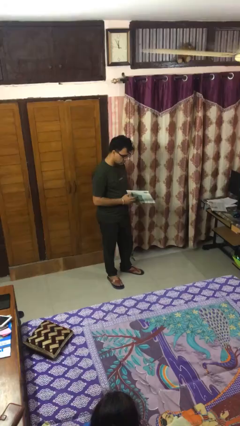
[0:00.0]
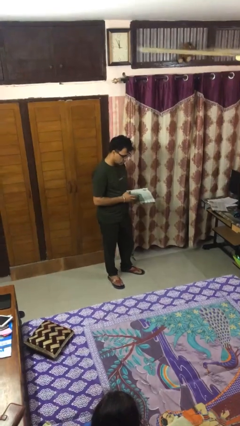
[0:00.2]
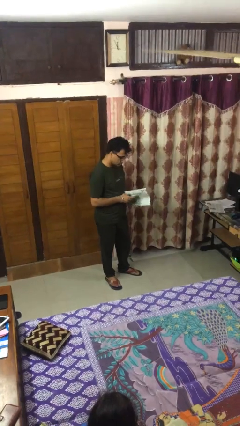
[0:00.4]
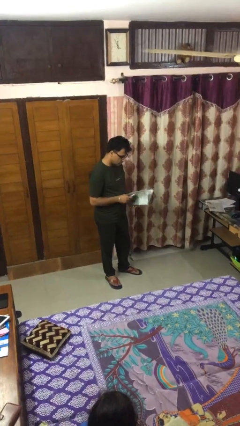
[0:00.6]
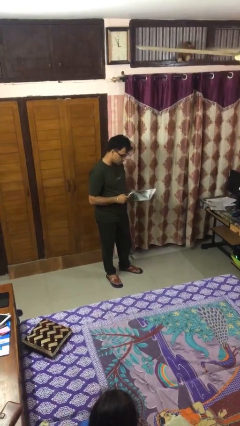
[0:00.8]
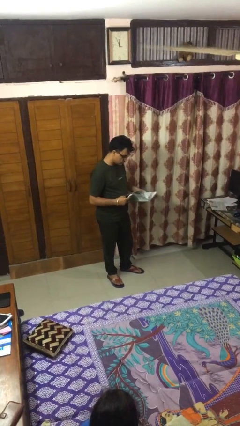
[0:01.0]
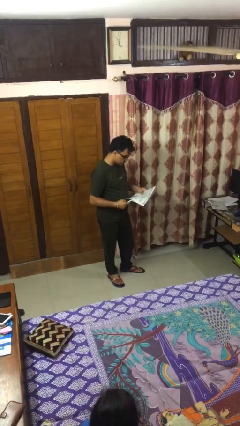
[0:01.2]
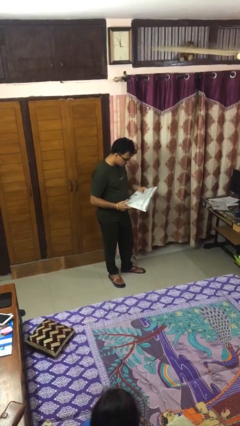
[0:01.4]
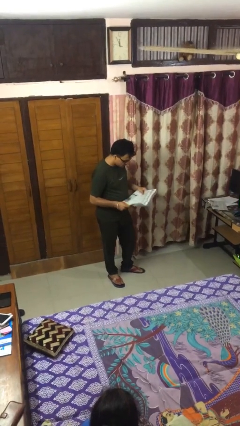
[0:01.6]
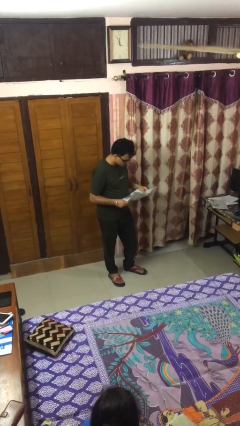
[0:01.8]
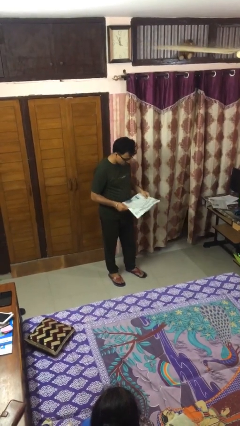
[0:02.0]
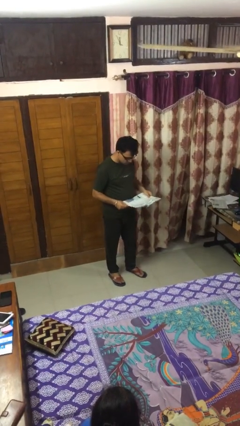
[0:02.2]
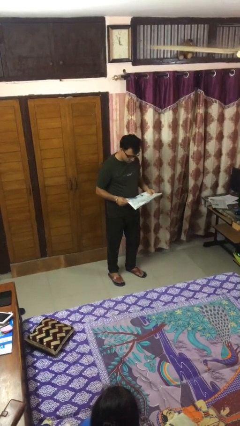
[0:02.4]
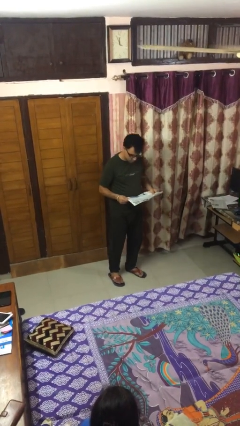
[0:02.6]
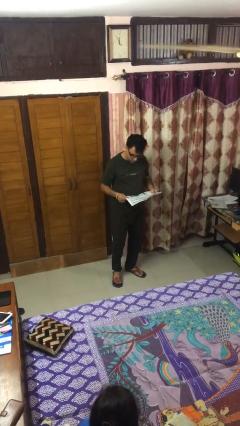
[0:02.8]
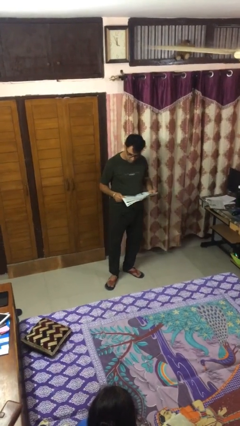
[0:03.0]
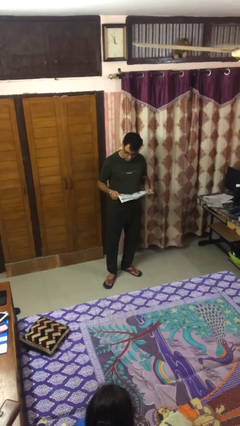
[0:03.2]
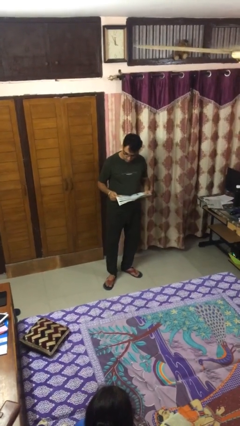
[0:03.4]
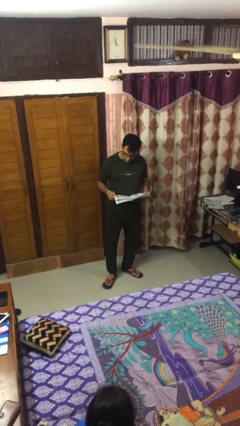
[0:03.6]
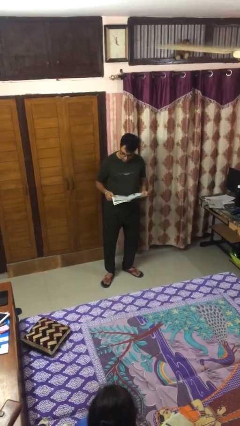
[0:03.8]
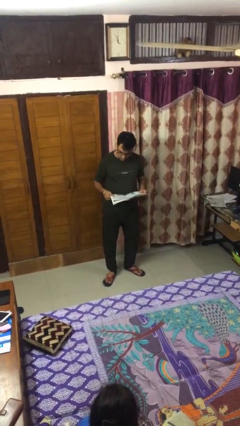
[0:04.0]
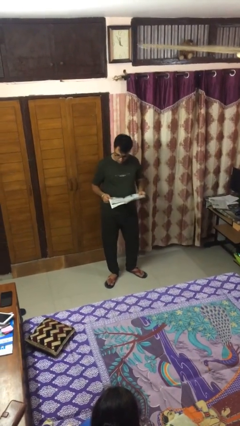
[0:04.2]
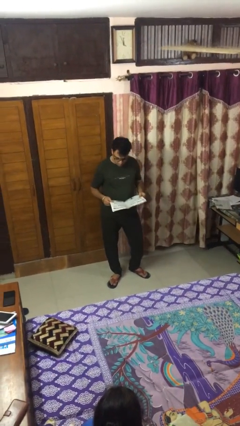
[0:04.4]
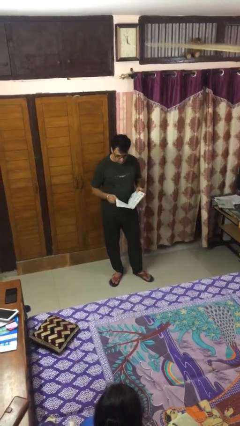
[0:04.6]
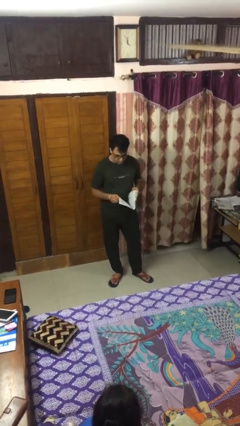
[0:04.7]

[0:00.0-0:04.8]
person reads newspaper

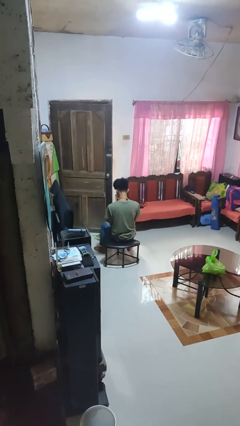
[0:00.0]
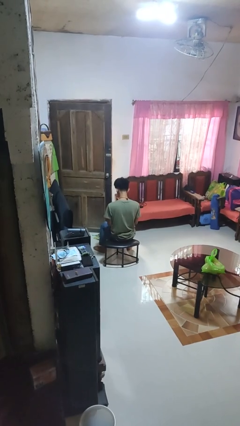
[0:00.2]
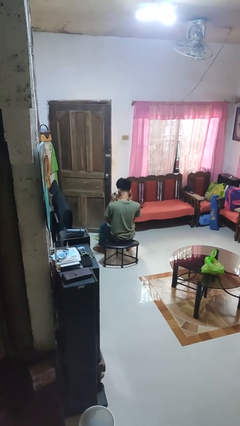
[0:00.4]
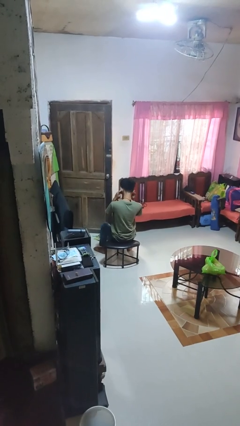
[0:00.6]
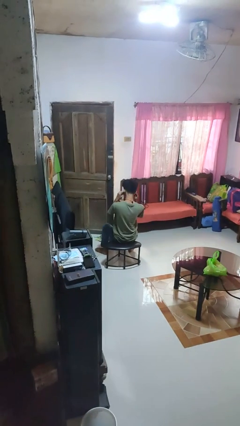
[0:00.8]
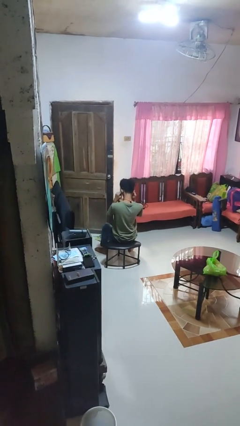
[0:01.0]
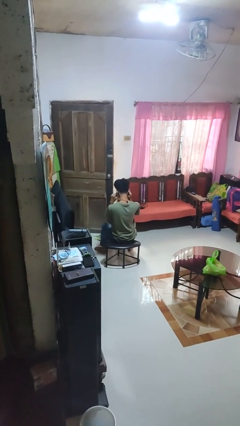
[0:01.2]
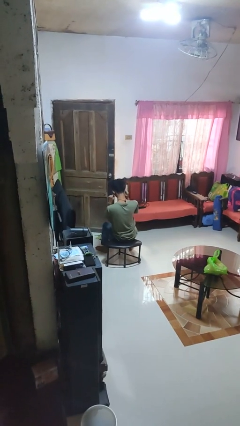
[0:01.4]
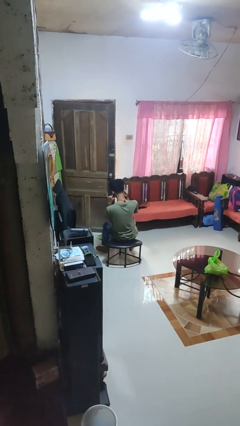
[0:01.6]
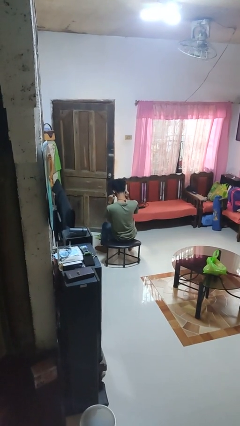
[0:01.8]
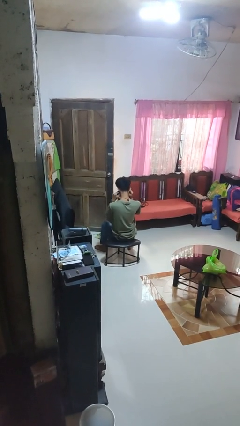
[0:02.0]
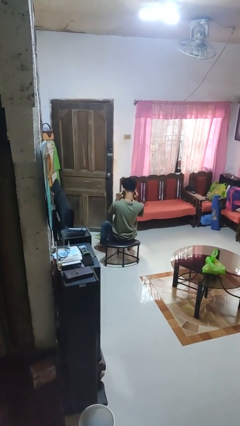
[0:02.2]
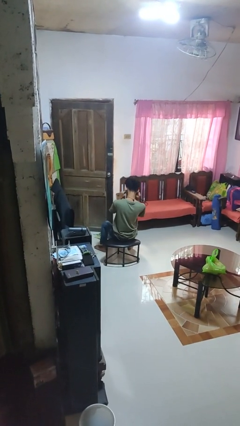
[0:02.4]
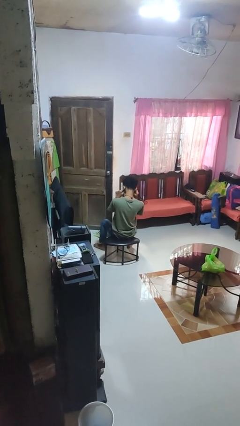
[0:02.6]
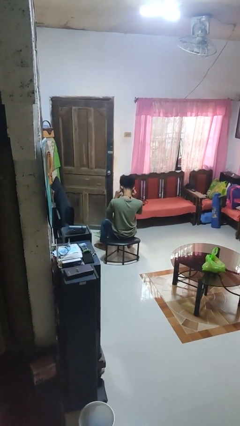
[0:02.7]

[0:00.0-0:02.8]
person puts fingers in ear

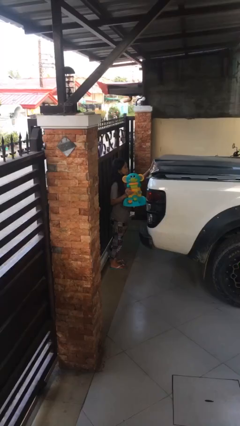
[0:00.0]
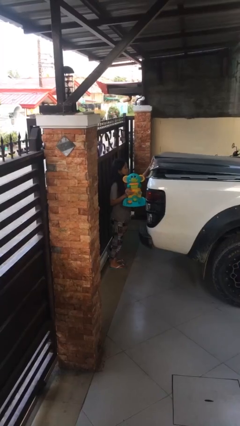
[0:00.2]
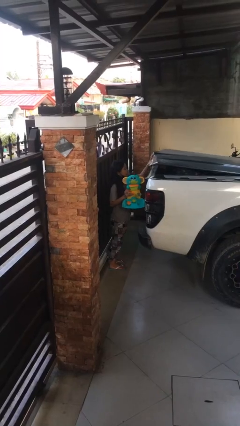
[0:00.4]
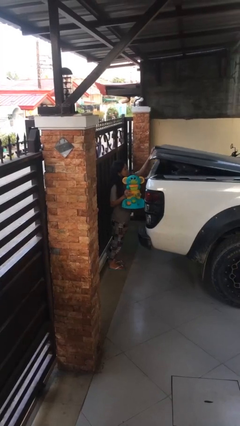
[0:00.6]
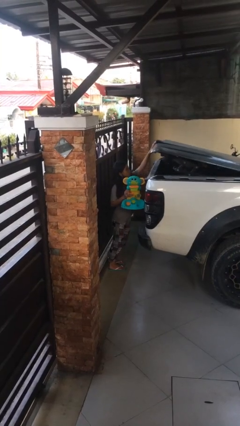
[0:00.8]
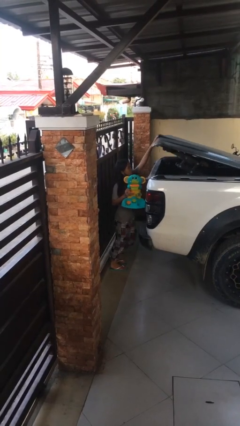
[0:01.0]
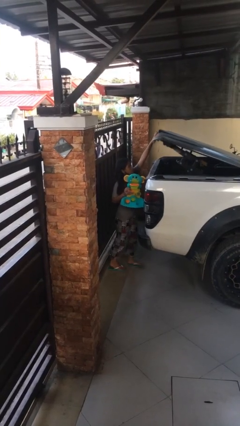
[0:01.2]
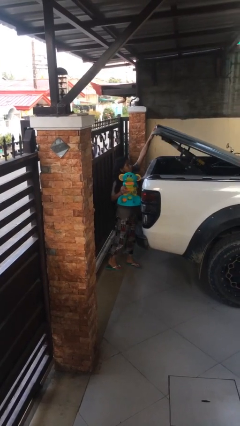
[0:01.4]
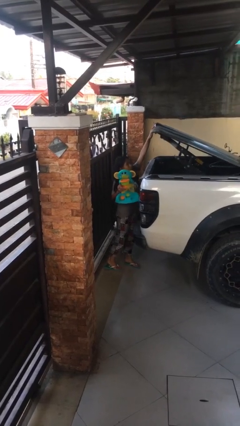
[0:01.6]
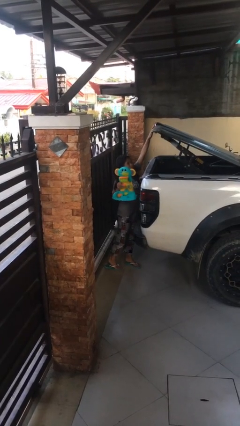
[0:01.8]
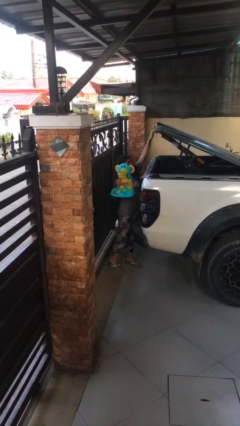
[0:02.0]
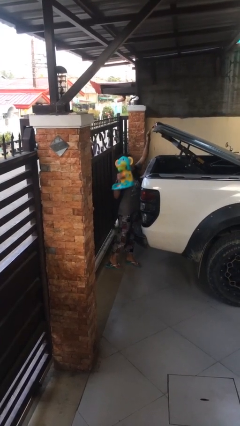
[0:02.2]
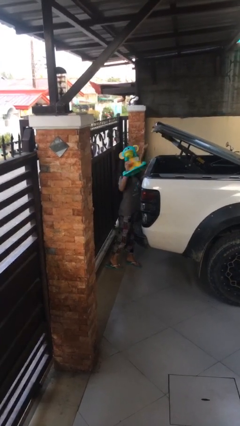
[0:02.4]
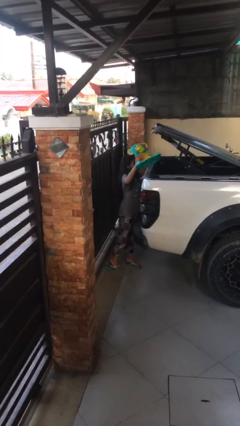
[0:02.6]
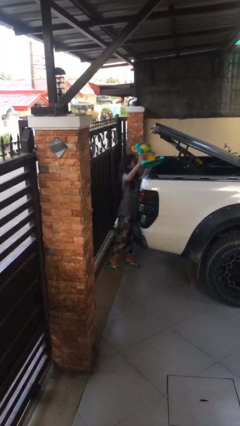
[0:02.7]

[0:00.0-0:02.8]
person opens car trunk

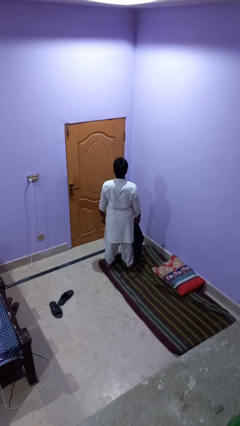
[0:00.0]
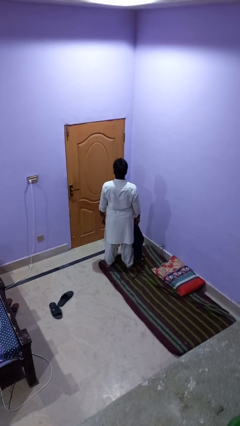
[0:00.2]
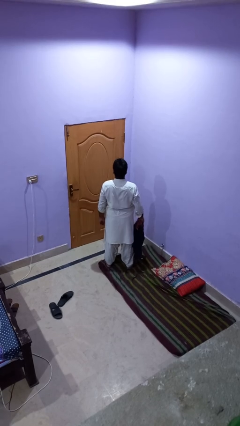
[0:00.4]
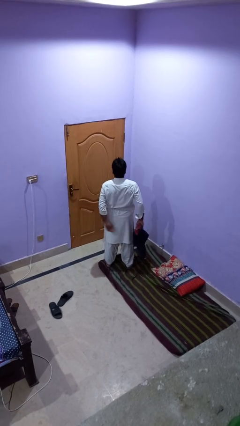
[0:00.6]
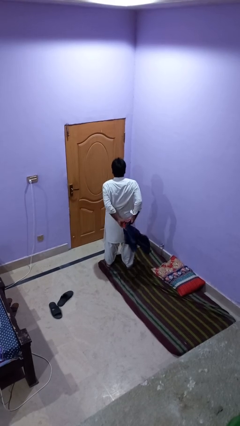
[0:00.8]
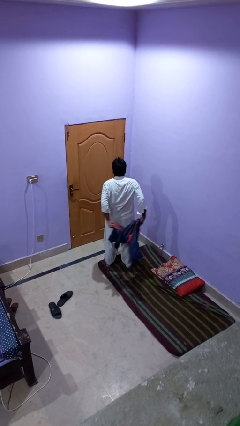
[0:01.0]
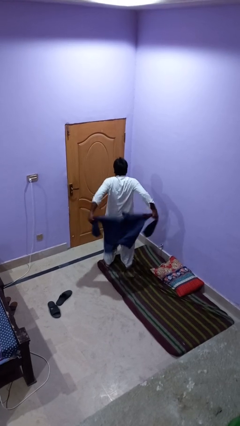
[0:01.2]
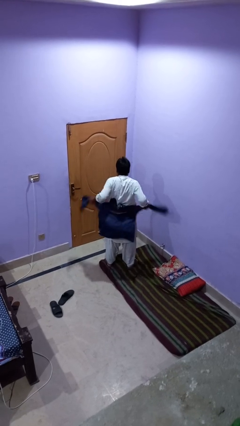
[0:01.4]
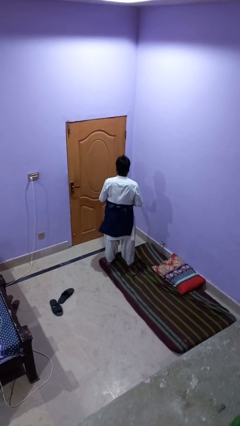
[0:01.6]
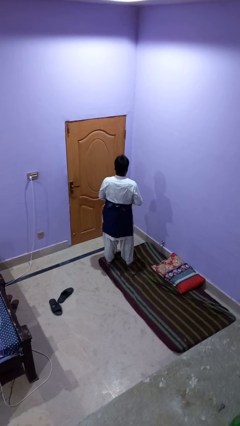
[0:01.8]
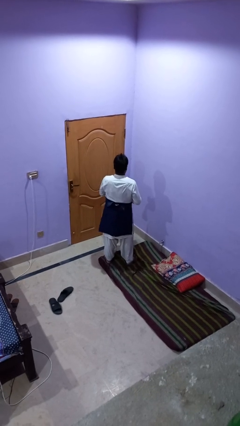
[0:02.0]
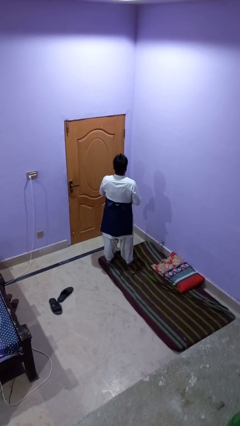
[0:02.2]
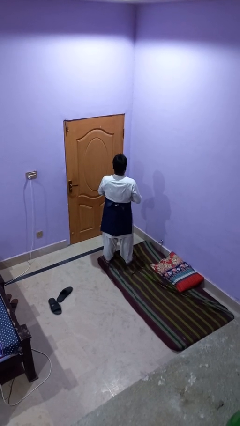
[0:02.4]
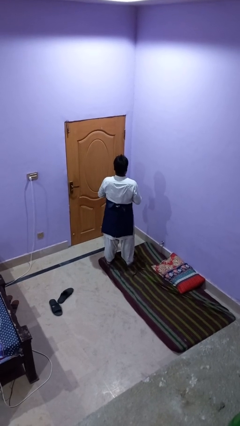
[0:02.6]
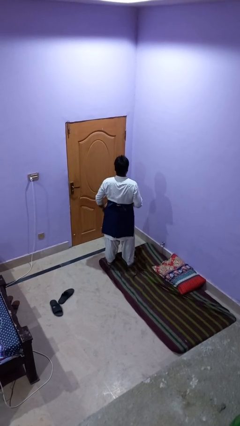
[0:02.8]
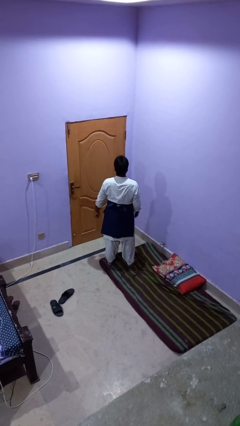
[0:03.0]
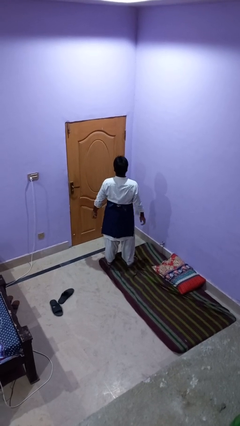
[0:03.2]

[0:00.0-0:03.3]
person ties jacket around waist

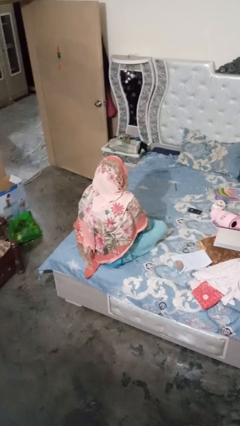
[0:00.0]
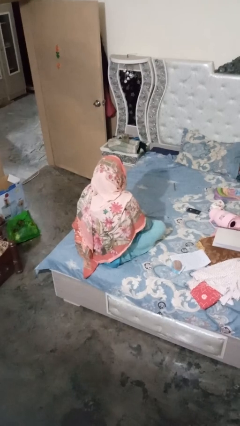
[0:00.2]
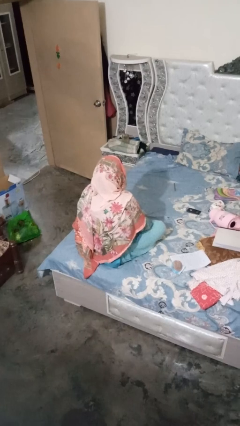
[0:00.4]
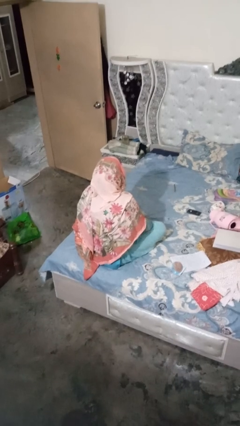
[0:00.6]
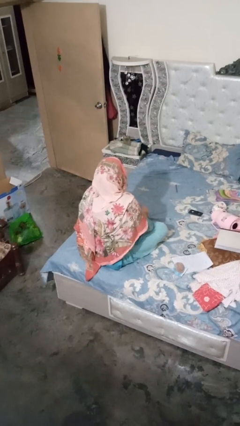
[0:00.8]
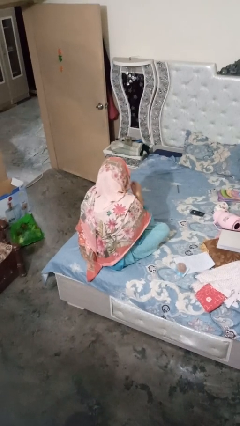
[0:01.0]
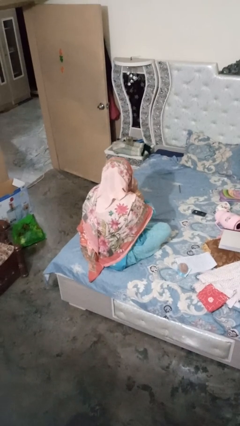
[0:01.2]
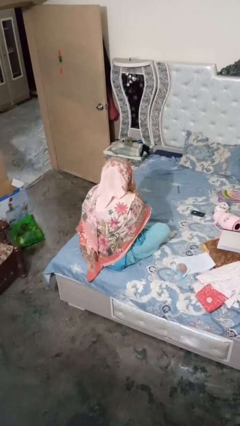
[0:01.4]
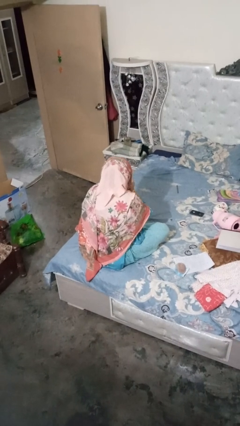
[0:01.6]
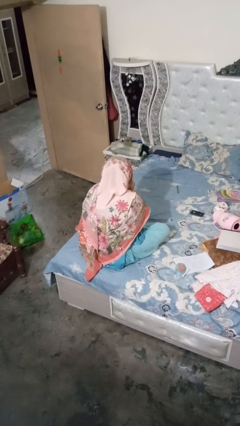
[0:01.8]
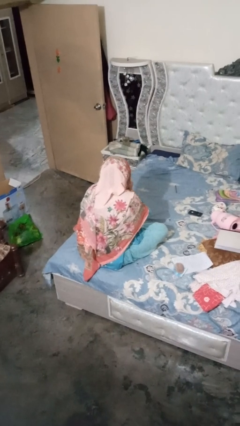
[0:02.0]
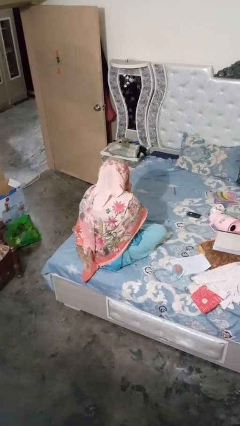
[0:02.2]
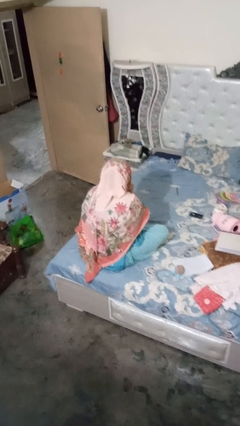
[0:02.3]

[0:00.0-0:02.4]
person gestures listen closely

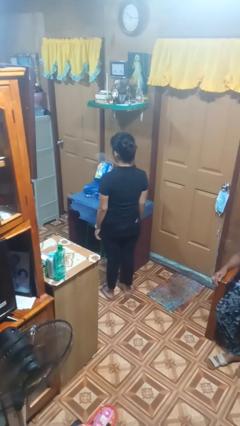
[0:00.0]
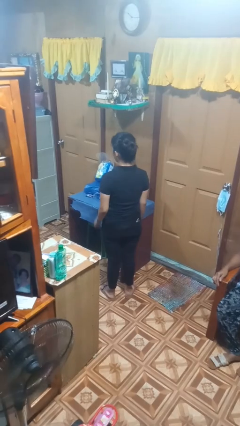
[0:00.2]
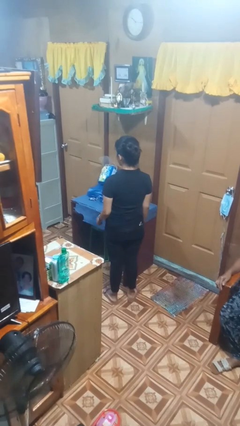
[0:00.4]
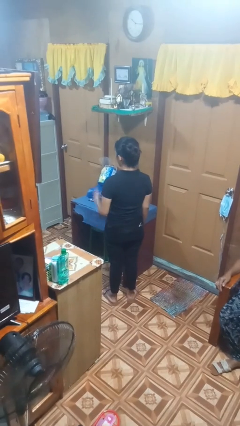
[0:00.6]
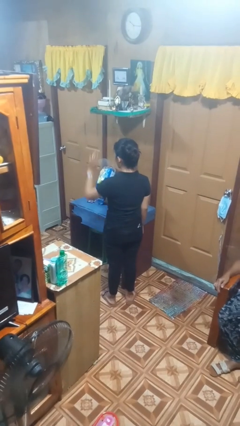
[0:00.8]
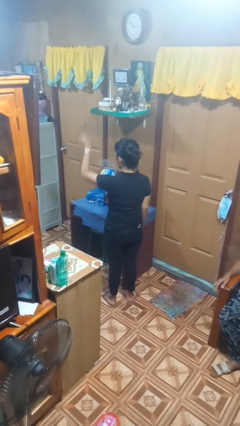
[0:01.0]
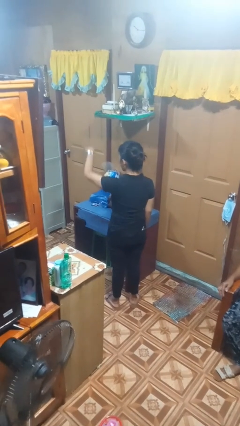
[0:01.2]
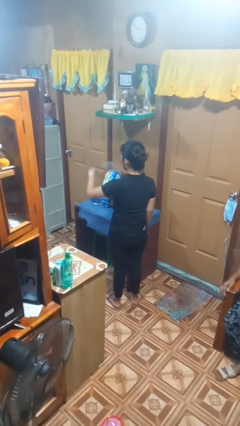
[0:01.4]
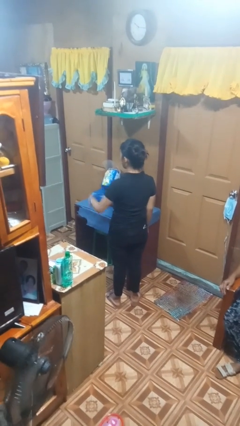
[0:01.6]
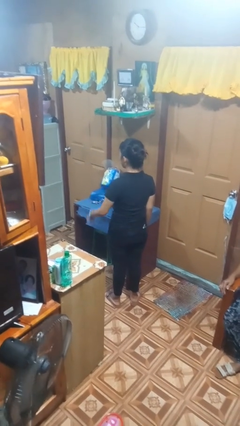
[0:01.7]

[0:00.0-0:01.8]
person gestures come here
